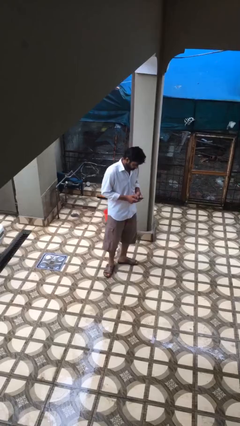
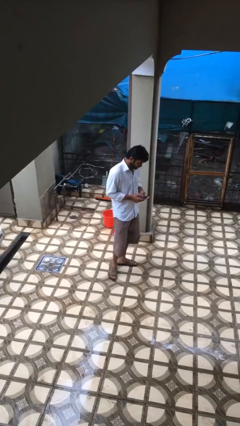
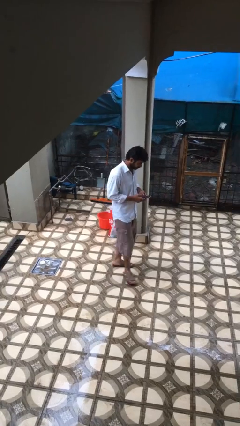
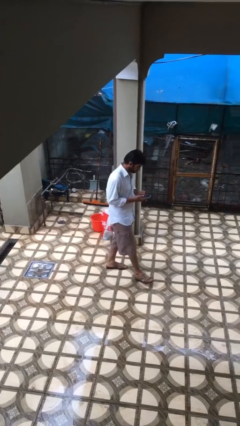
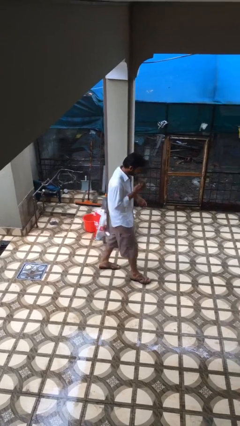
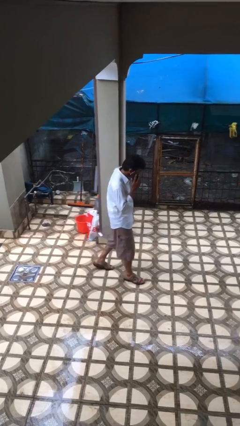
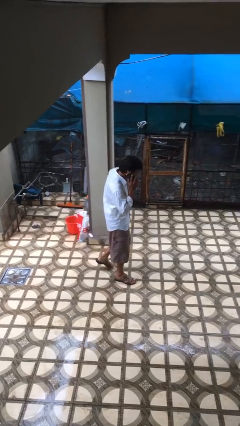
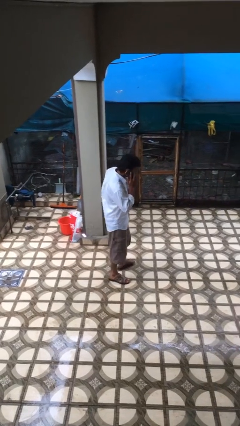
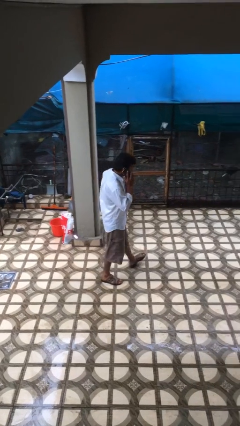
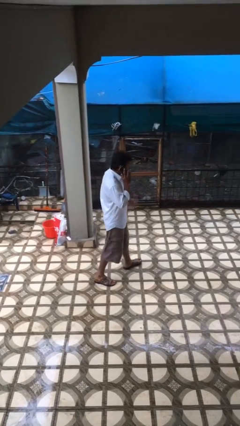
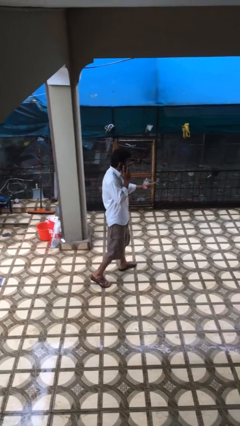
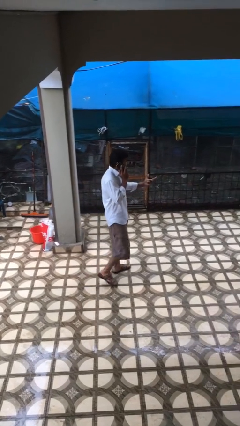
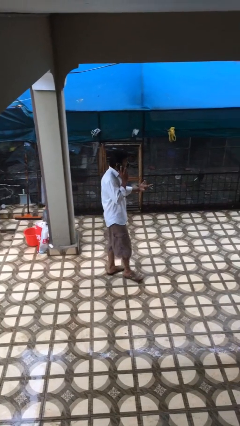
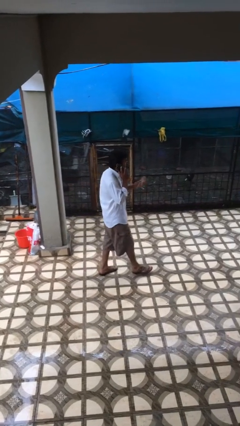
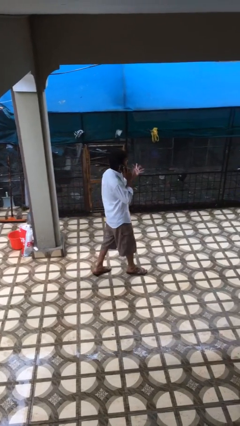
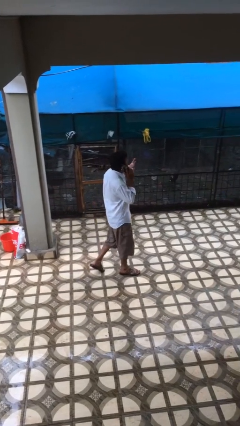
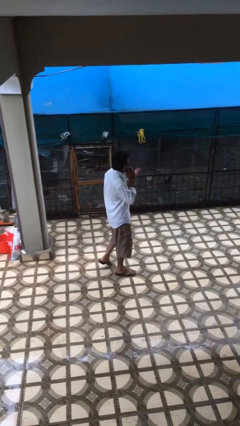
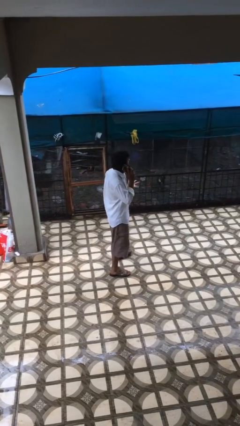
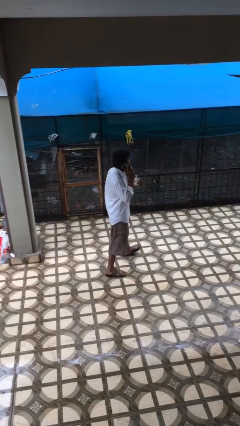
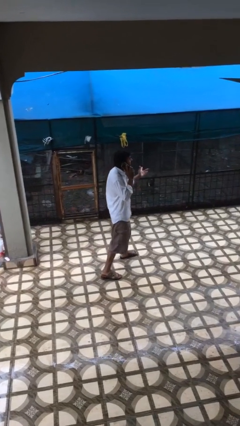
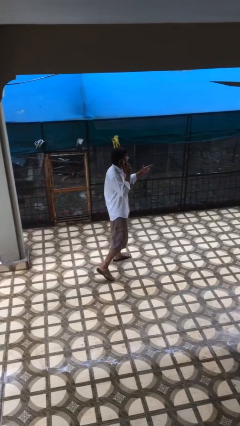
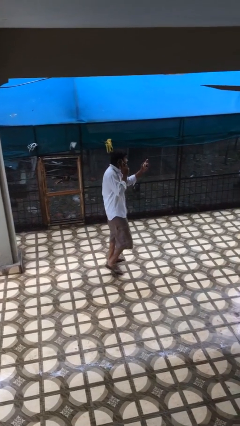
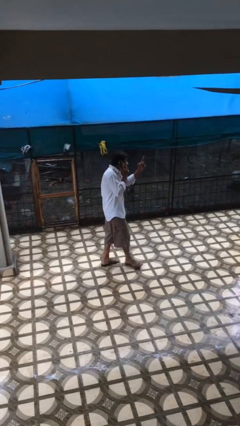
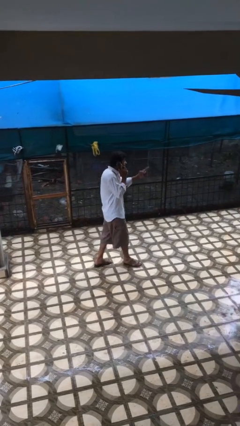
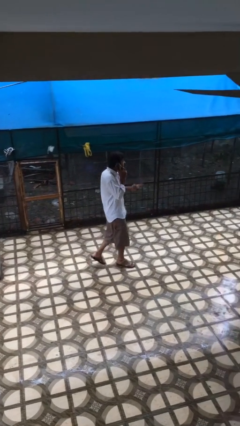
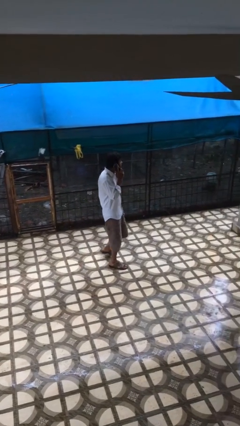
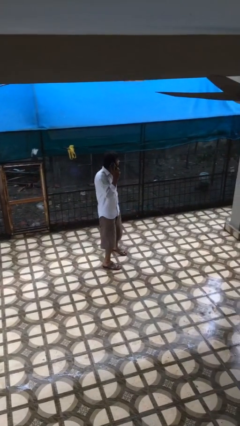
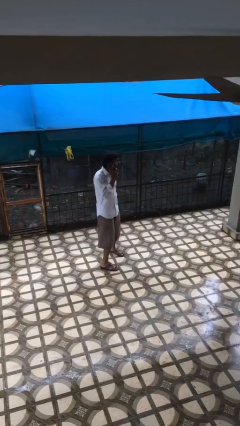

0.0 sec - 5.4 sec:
person talks on phone

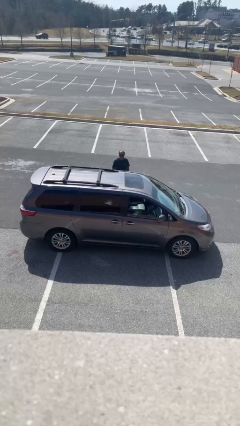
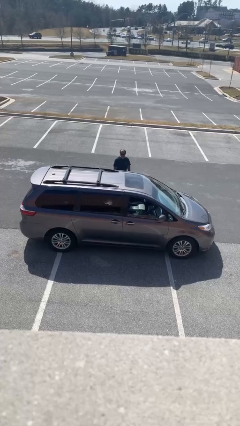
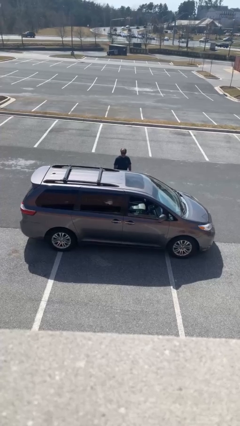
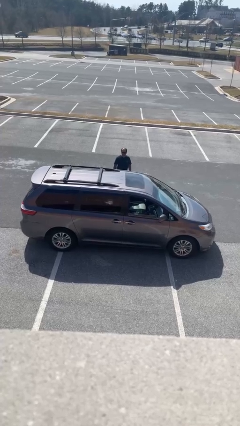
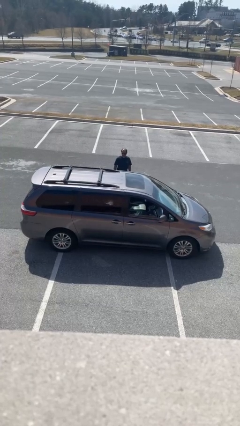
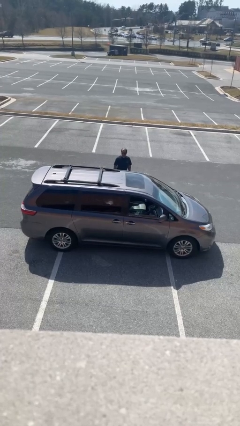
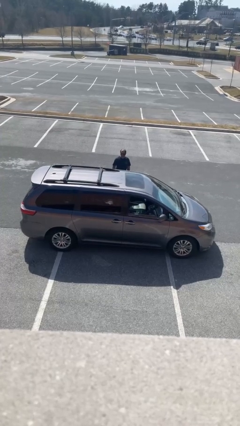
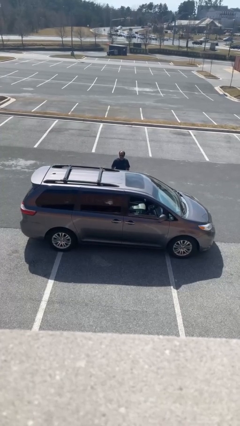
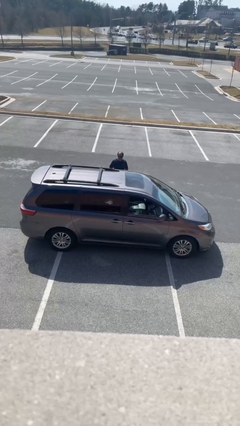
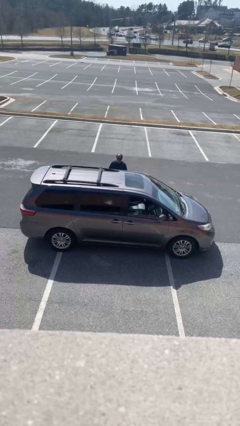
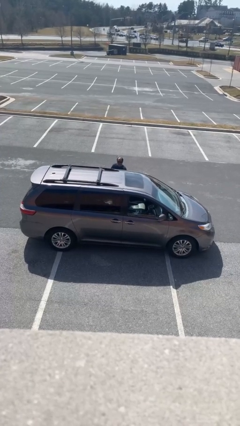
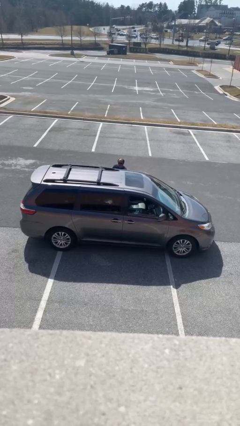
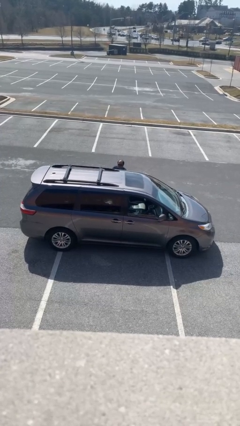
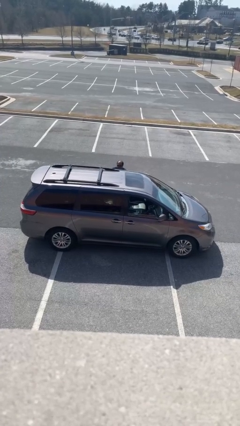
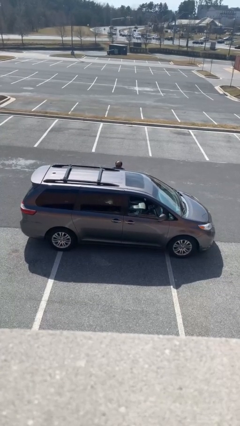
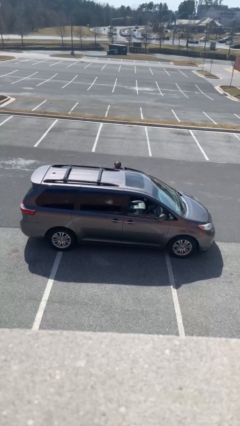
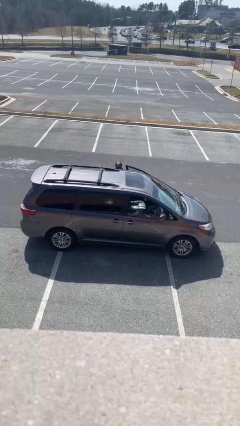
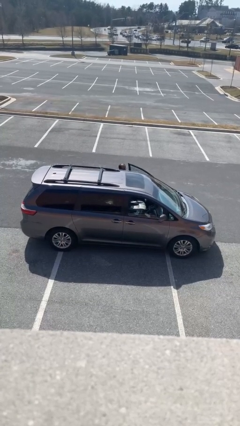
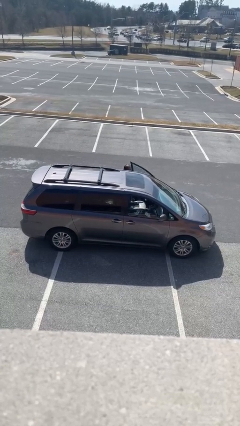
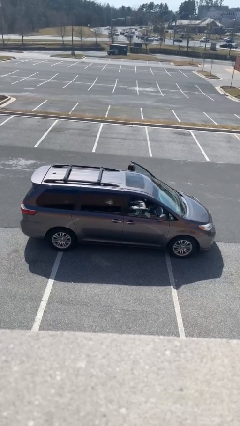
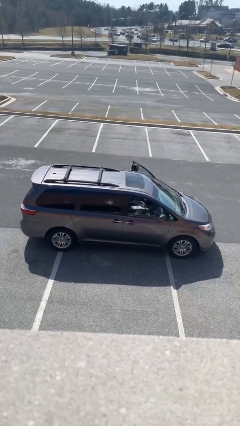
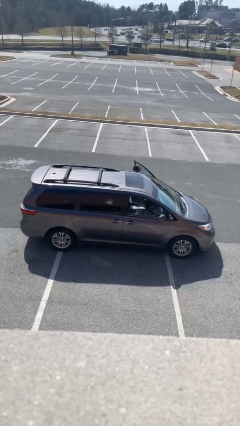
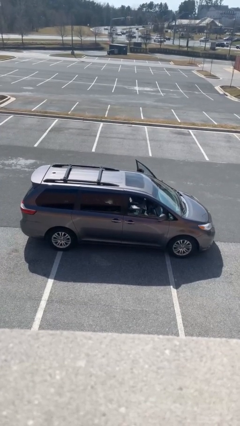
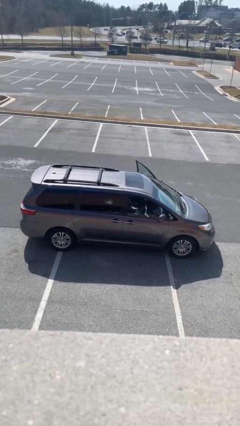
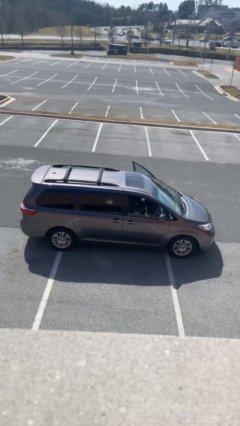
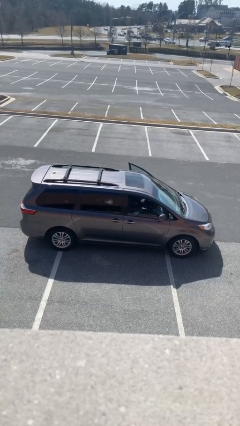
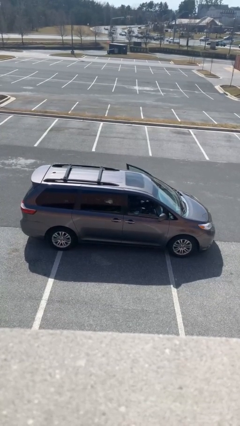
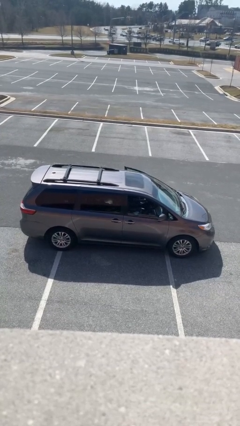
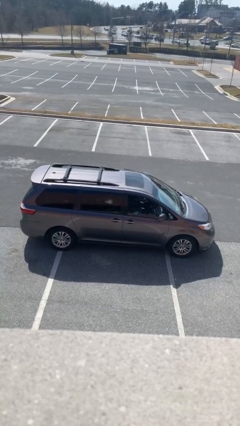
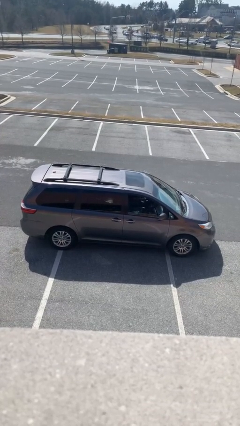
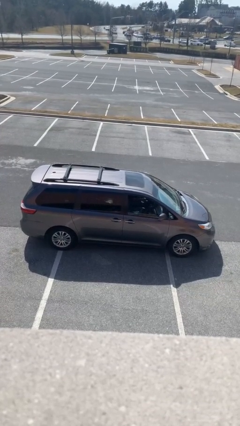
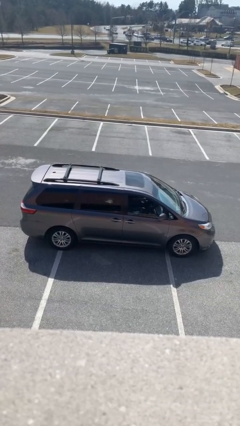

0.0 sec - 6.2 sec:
car picks up person

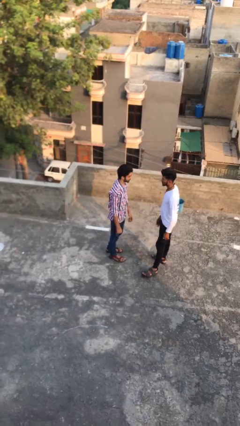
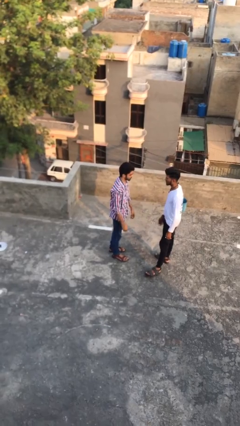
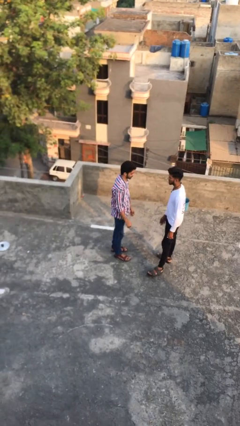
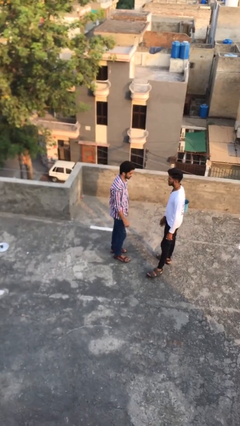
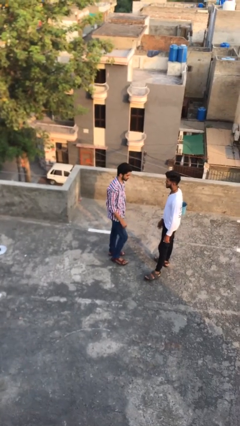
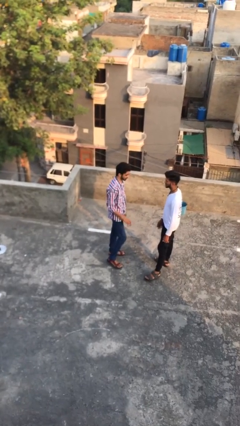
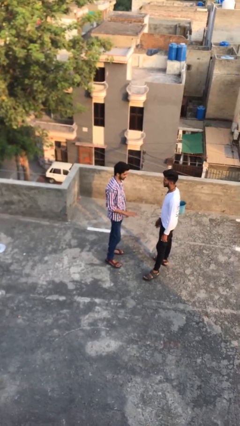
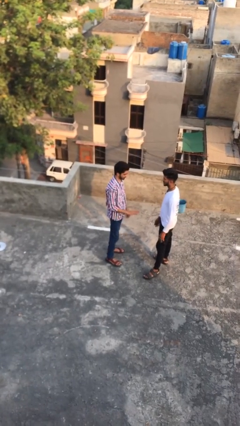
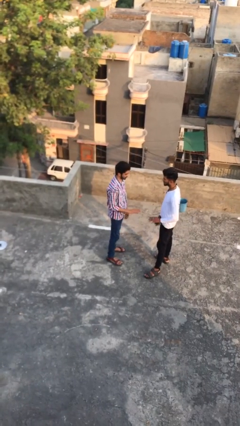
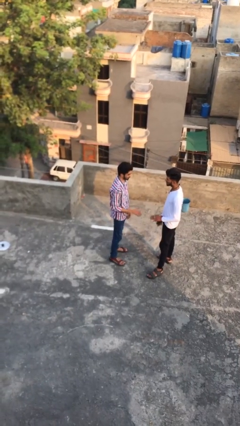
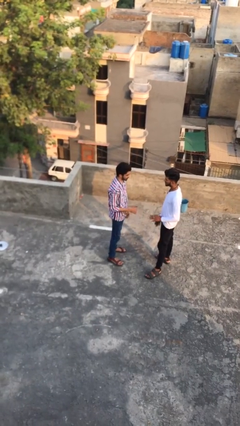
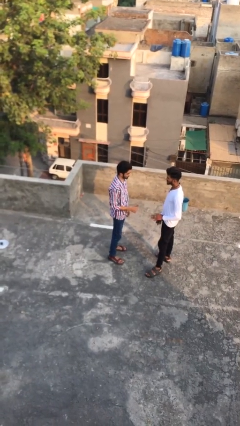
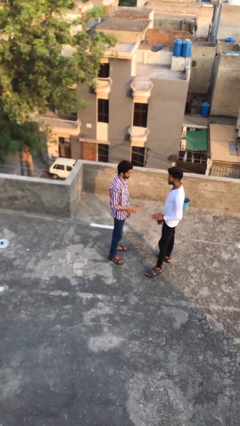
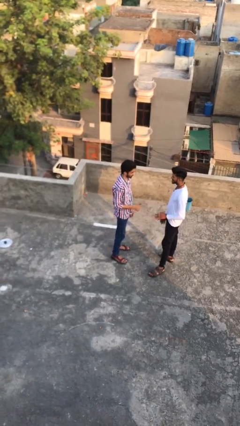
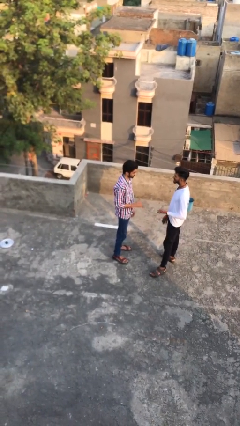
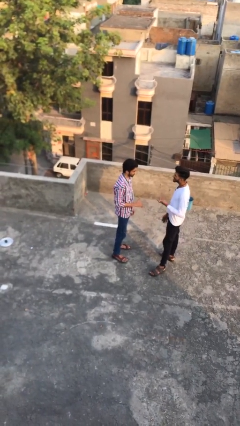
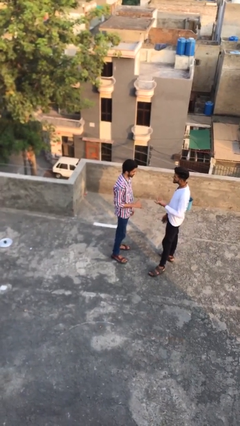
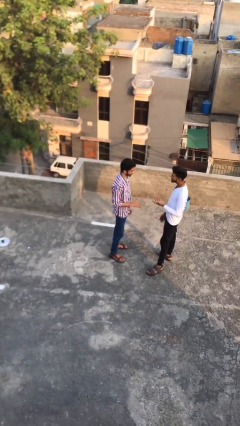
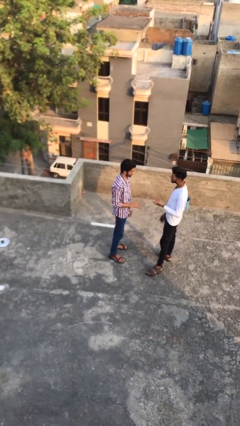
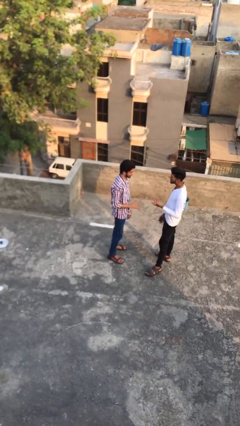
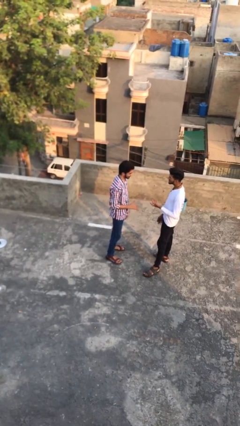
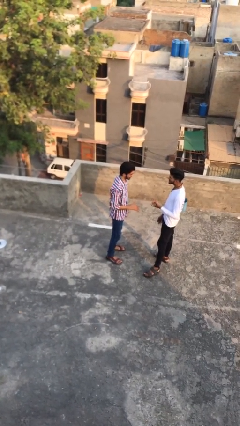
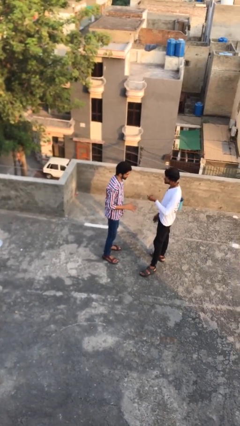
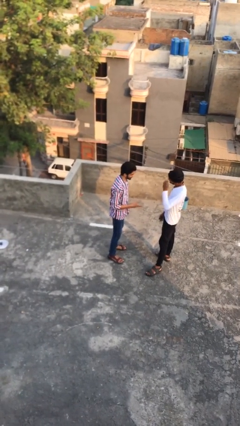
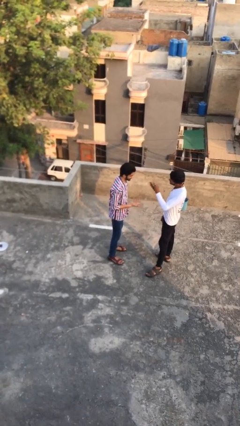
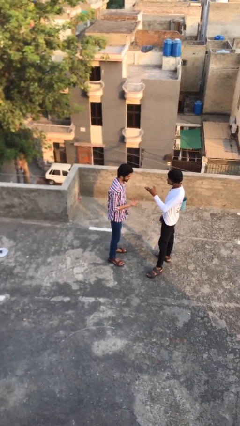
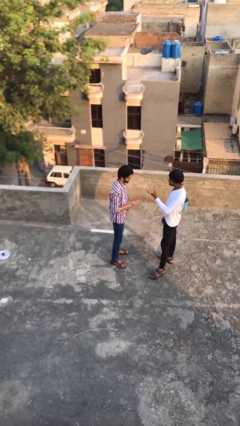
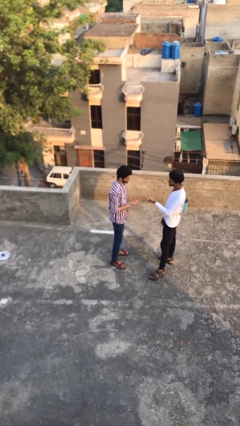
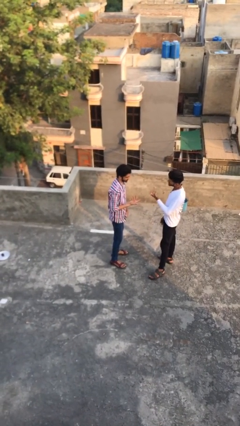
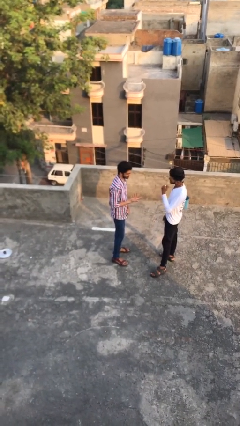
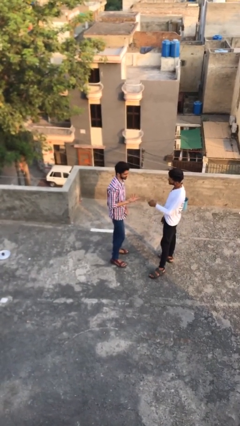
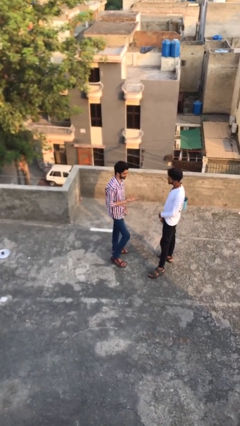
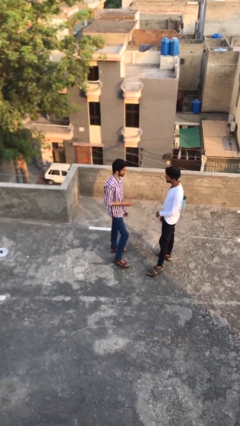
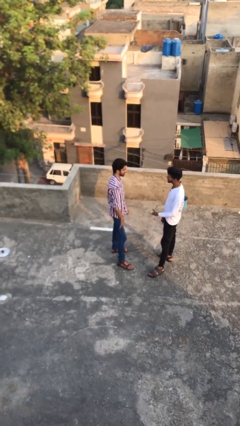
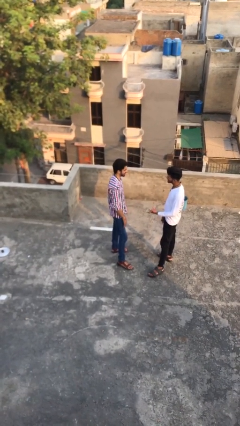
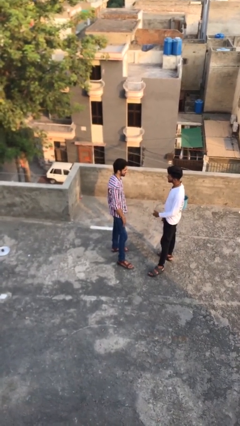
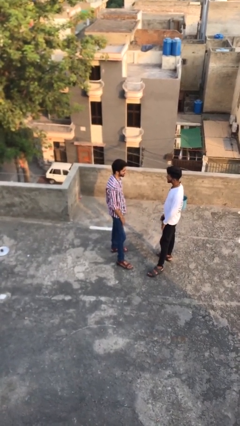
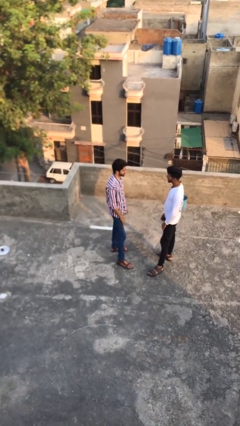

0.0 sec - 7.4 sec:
person talks to person
